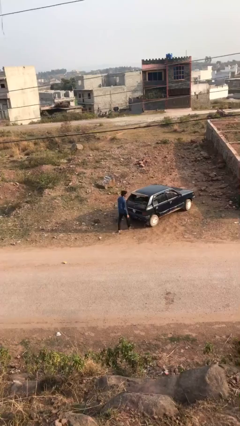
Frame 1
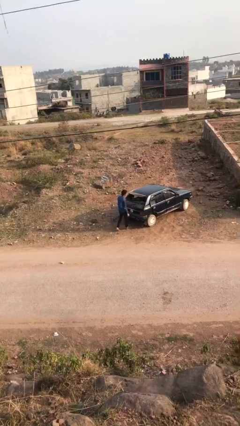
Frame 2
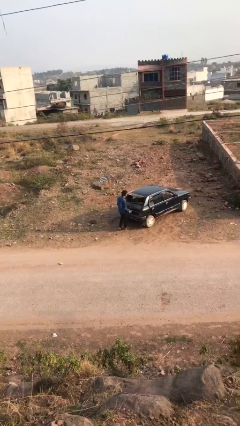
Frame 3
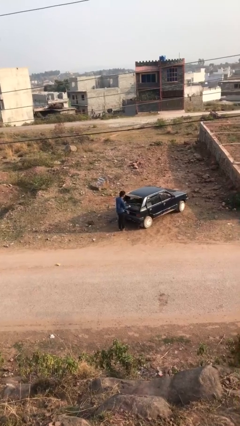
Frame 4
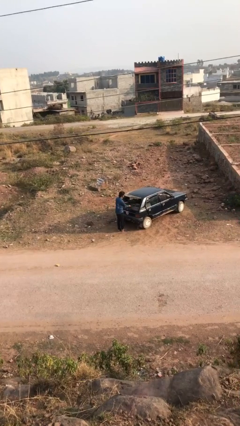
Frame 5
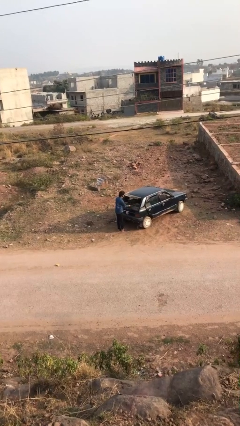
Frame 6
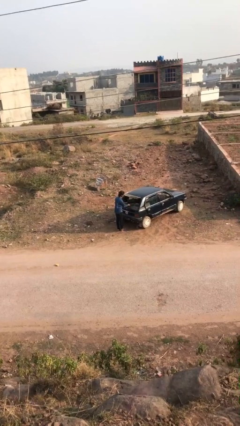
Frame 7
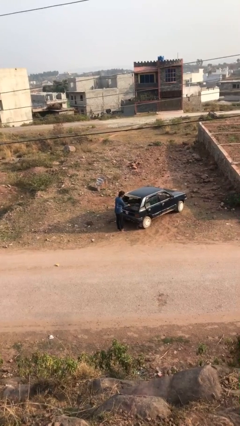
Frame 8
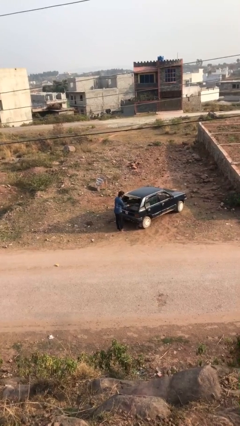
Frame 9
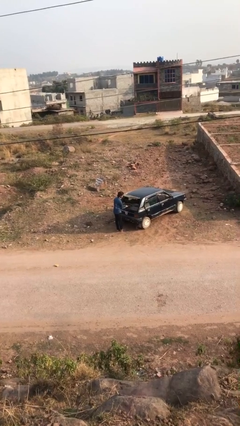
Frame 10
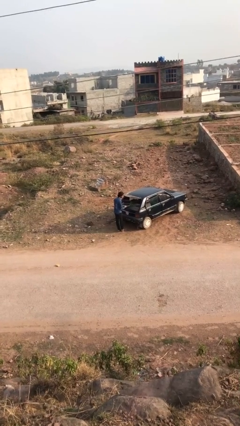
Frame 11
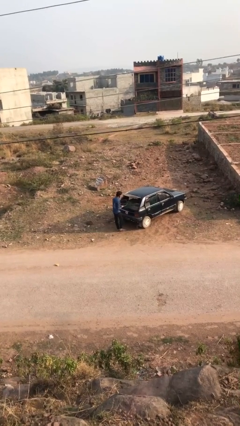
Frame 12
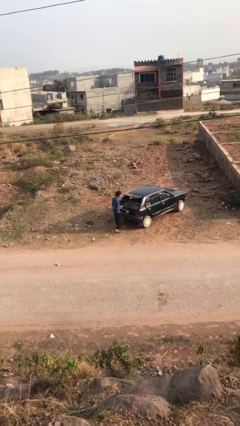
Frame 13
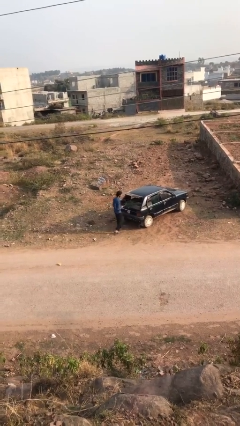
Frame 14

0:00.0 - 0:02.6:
person unloads car

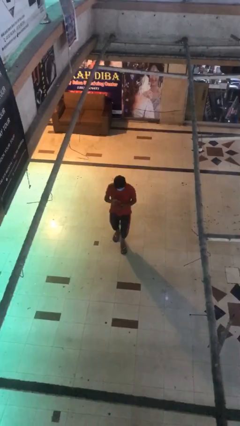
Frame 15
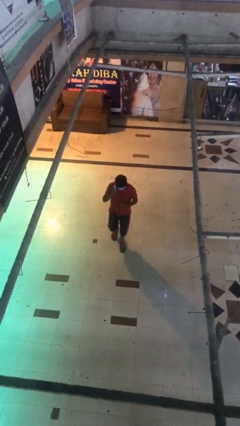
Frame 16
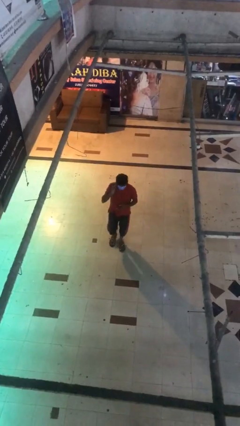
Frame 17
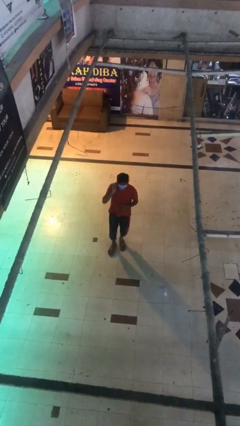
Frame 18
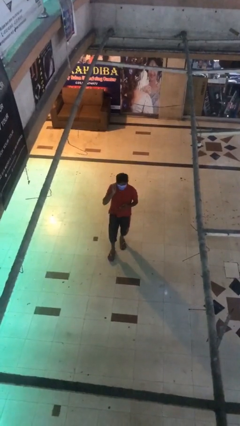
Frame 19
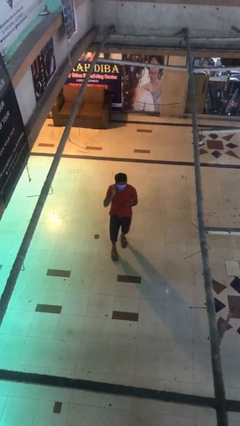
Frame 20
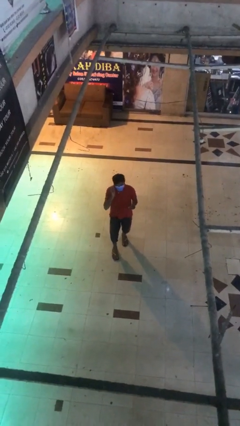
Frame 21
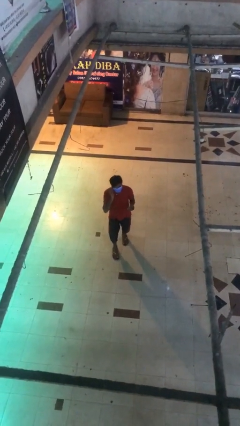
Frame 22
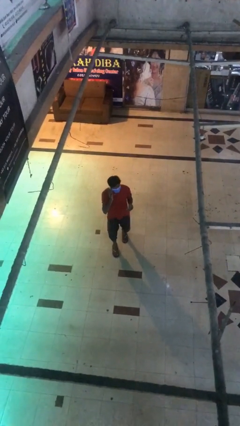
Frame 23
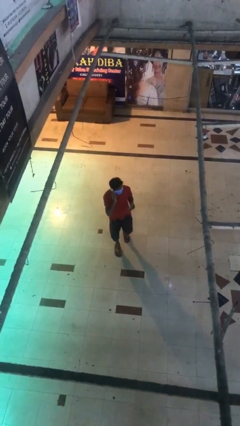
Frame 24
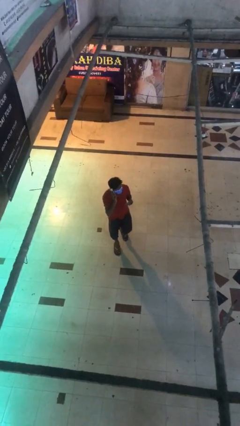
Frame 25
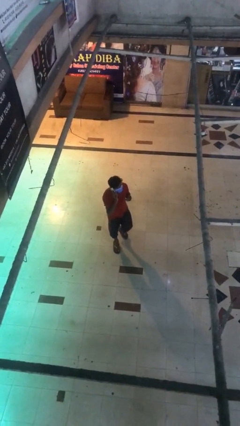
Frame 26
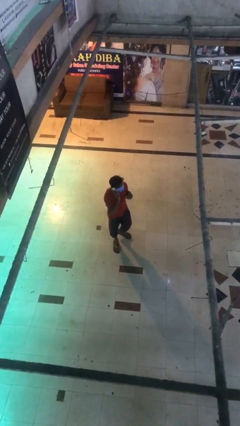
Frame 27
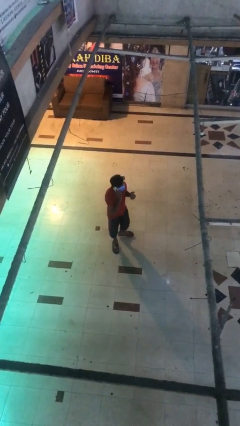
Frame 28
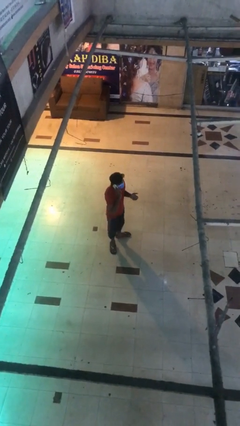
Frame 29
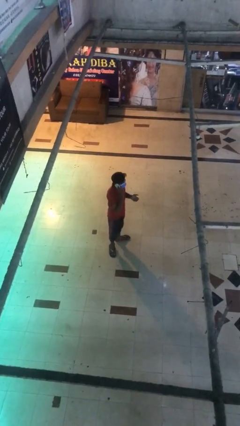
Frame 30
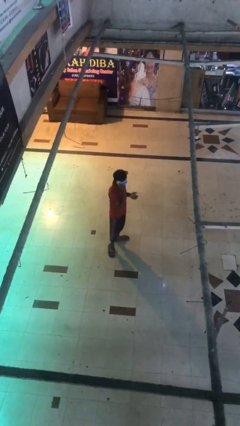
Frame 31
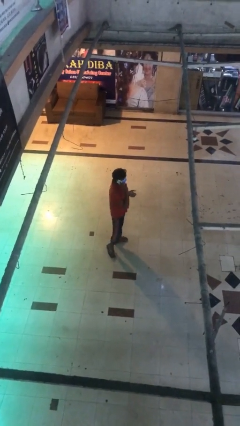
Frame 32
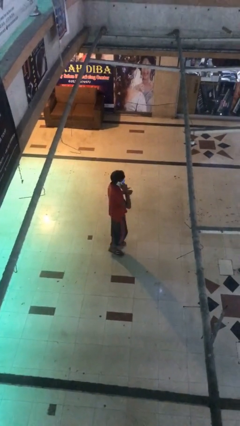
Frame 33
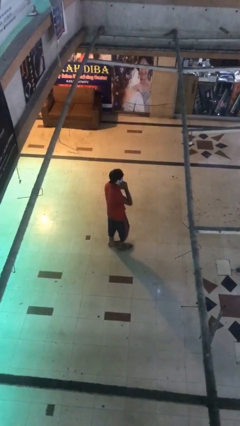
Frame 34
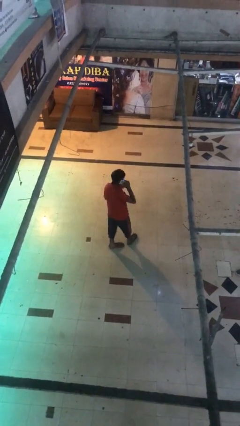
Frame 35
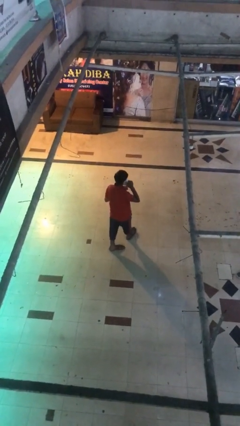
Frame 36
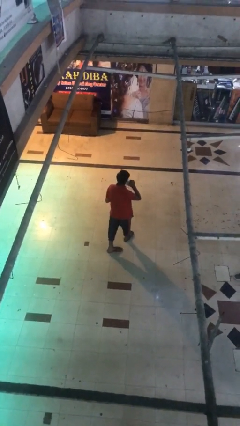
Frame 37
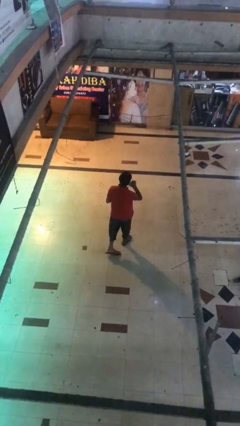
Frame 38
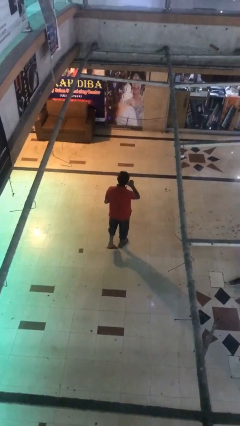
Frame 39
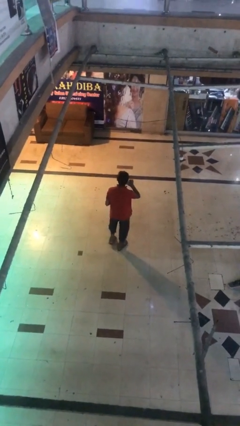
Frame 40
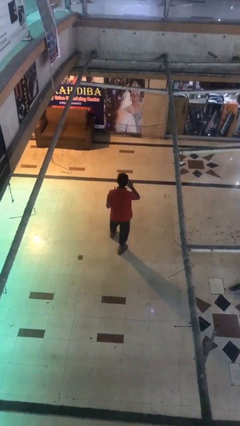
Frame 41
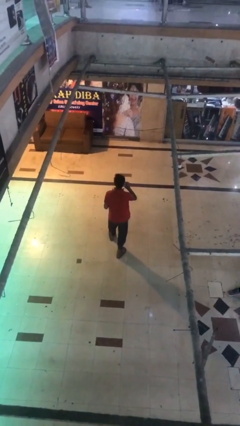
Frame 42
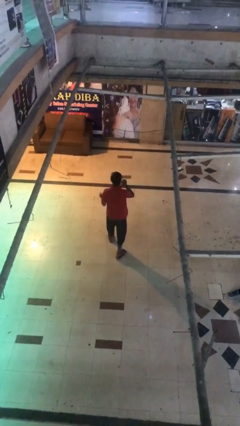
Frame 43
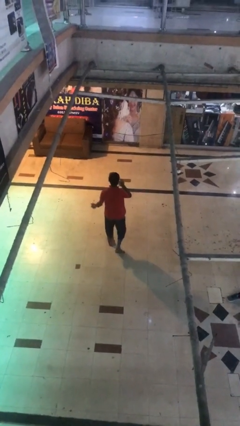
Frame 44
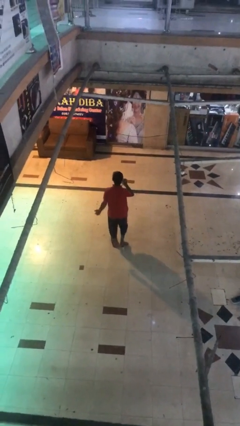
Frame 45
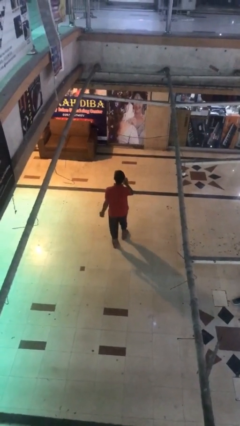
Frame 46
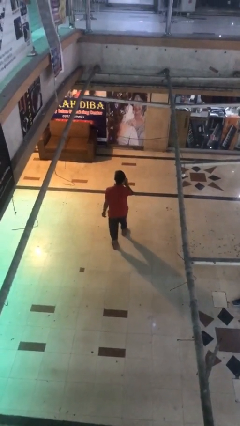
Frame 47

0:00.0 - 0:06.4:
person talks on phone

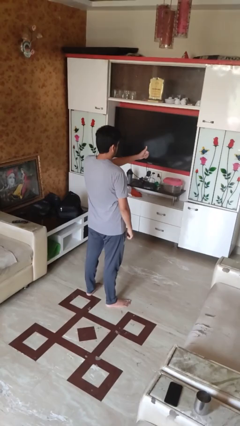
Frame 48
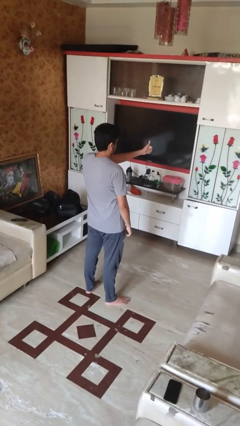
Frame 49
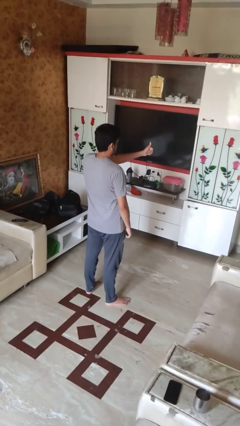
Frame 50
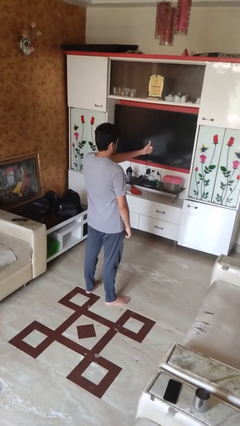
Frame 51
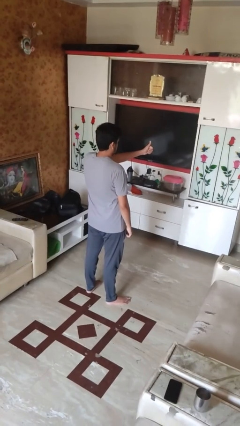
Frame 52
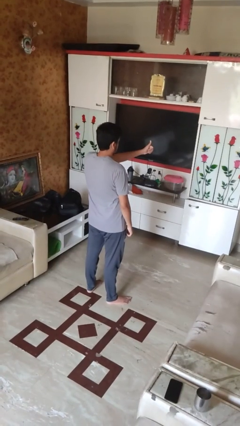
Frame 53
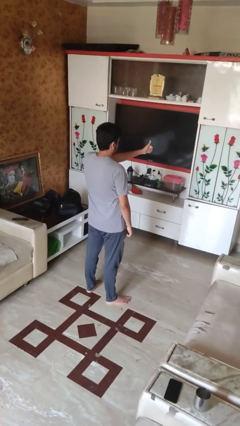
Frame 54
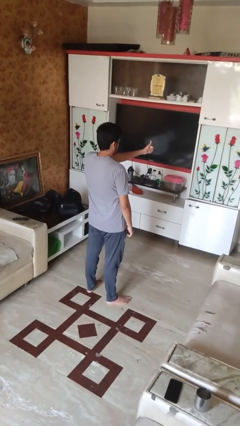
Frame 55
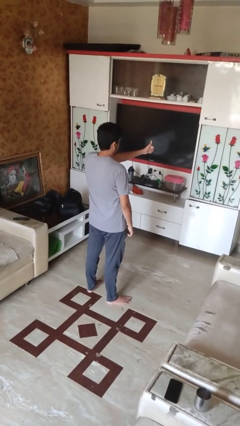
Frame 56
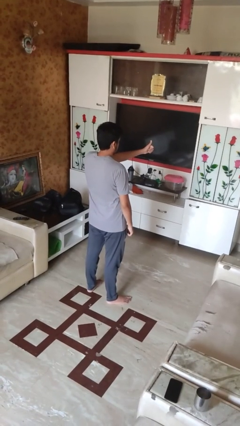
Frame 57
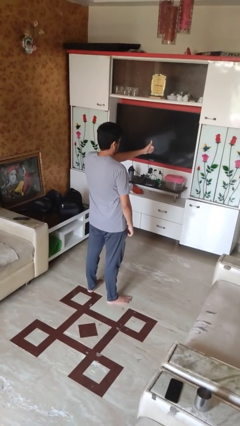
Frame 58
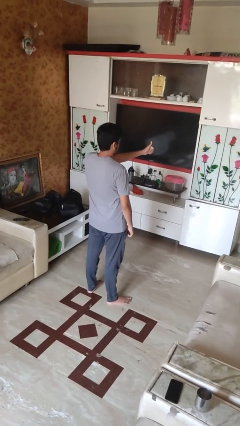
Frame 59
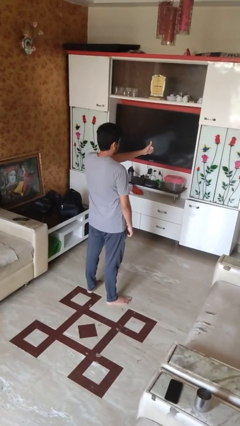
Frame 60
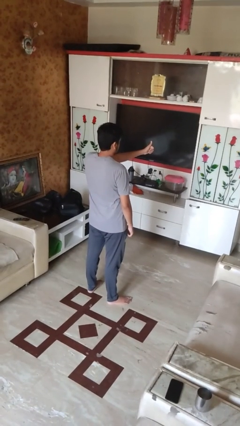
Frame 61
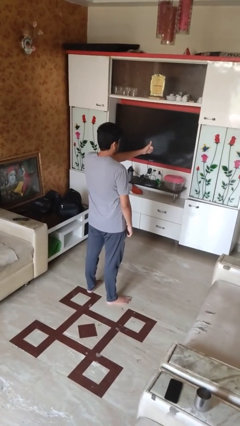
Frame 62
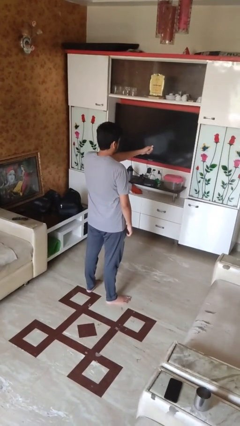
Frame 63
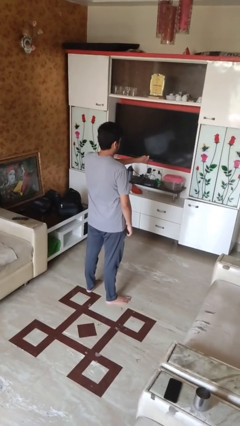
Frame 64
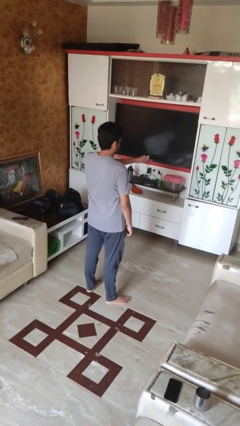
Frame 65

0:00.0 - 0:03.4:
person gestures thumbs up

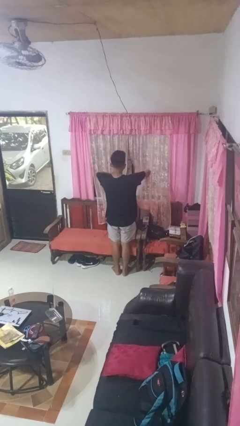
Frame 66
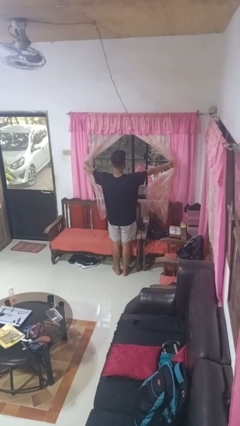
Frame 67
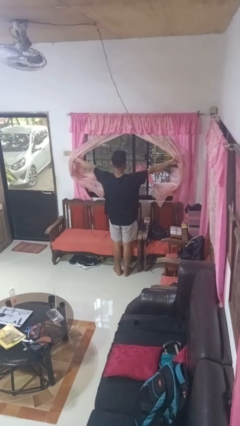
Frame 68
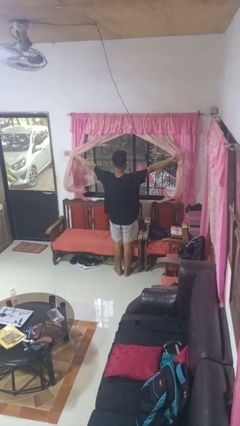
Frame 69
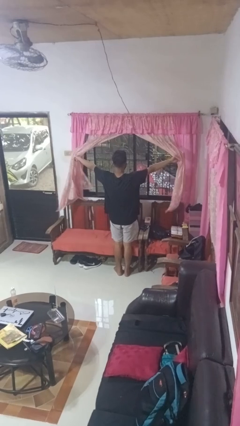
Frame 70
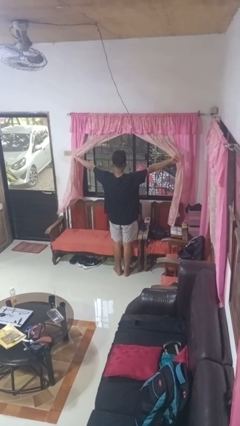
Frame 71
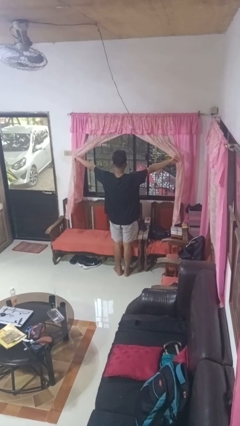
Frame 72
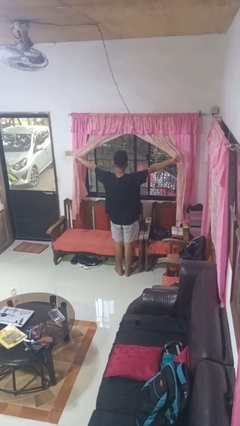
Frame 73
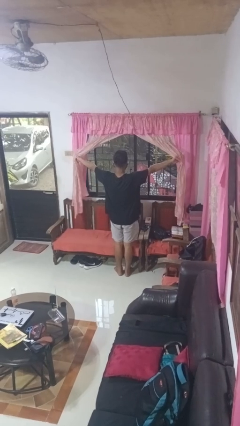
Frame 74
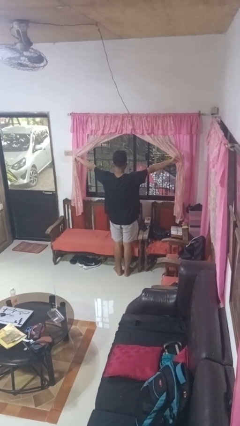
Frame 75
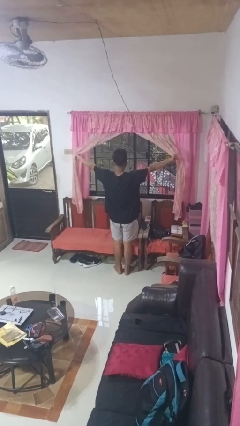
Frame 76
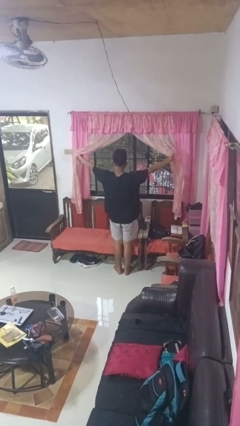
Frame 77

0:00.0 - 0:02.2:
person opens curtains

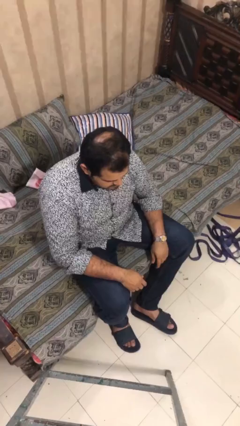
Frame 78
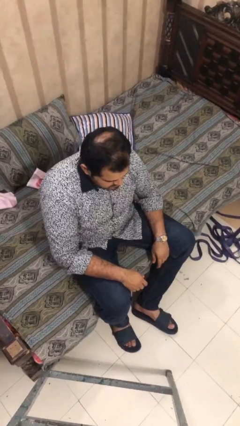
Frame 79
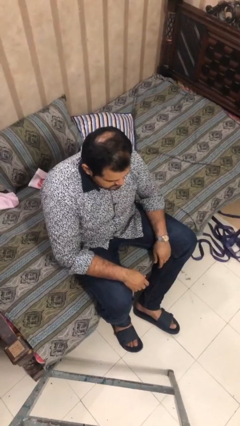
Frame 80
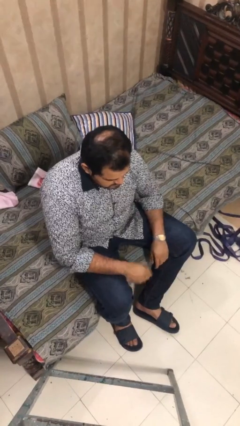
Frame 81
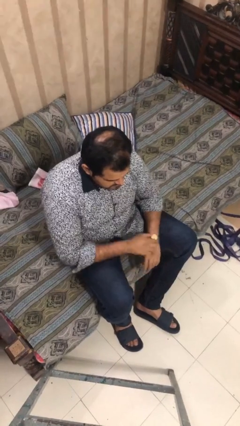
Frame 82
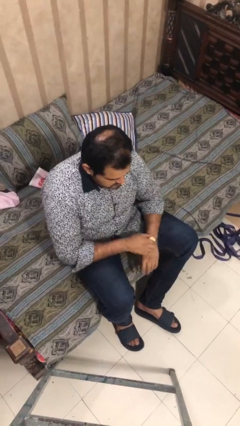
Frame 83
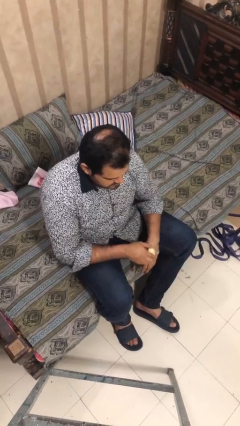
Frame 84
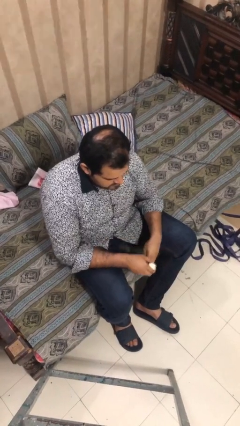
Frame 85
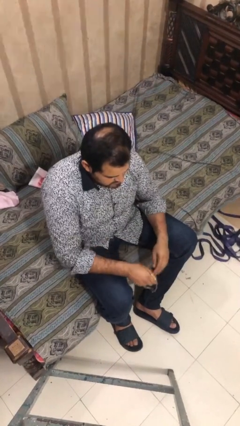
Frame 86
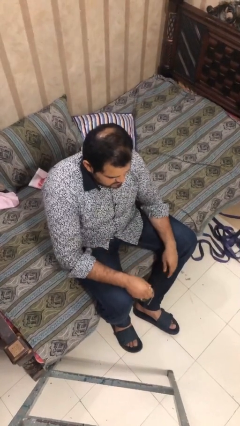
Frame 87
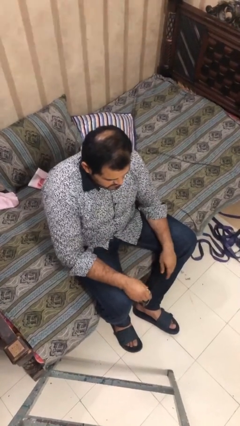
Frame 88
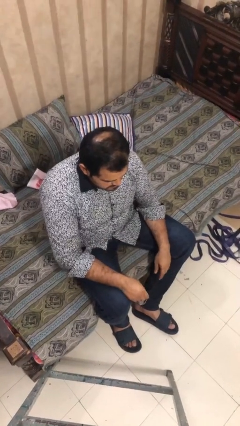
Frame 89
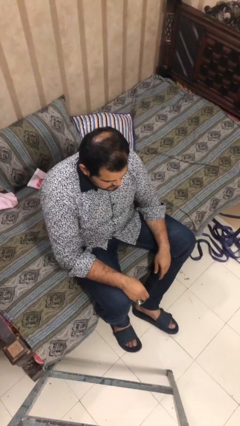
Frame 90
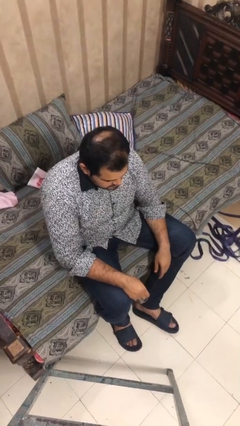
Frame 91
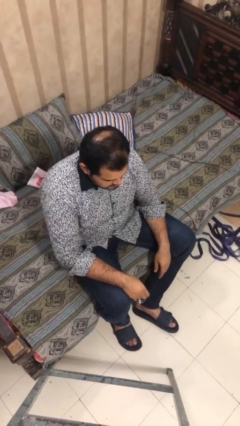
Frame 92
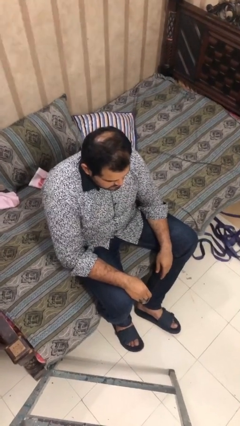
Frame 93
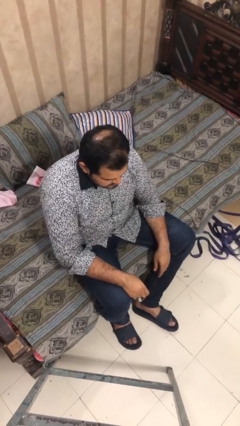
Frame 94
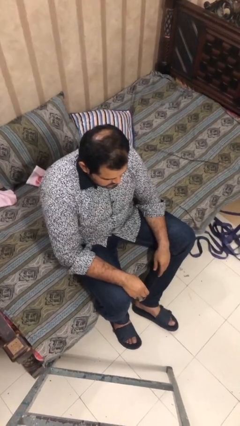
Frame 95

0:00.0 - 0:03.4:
person takes off wristwatch
